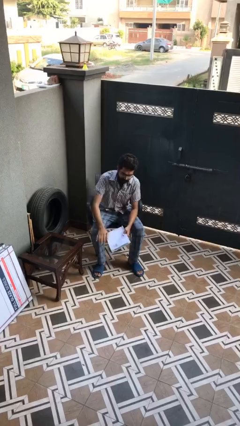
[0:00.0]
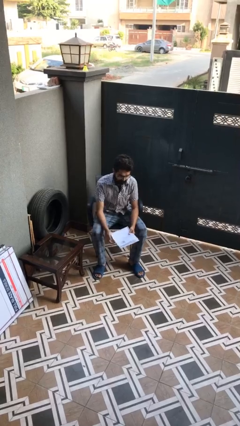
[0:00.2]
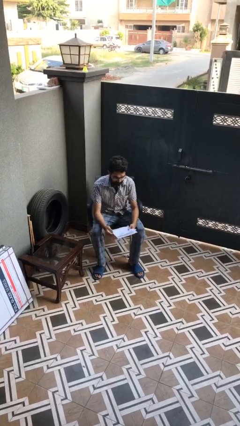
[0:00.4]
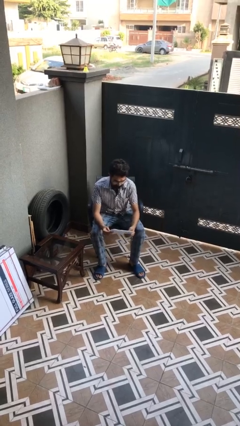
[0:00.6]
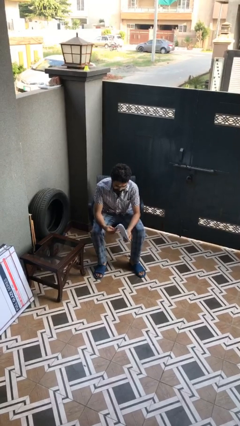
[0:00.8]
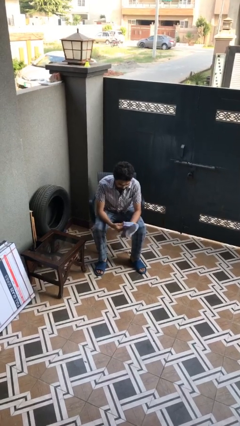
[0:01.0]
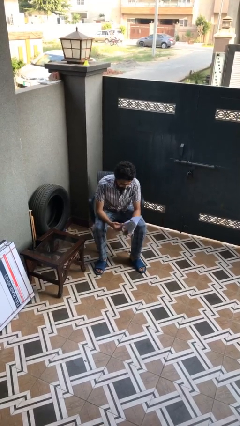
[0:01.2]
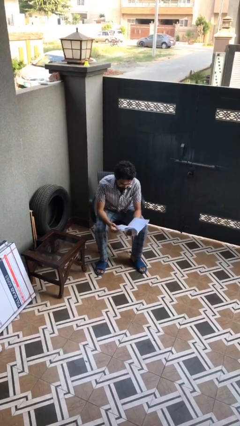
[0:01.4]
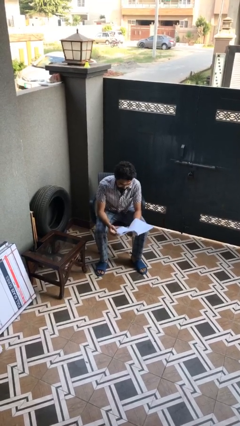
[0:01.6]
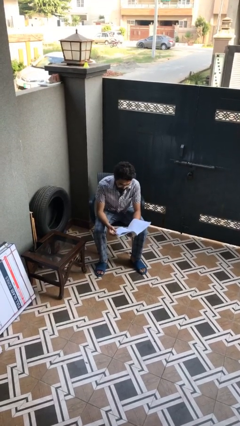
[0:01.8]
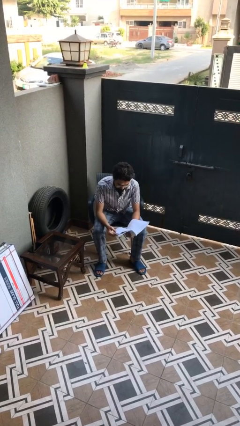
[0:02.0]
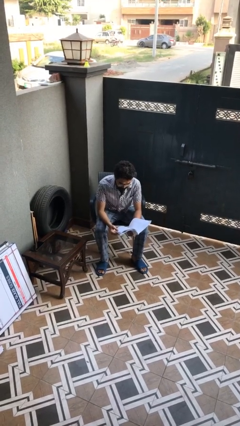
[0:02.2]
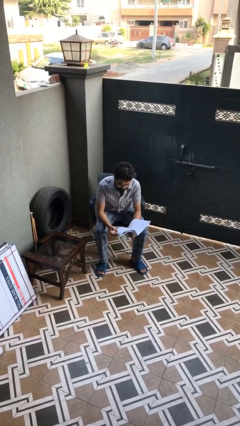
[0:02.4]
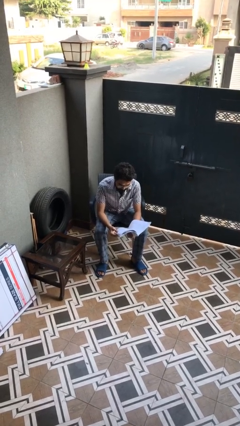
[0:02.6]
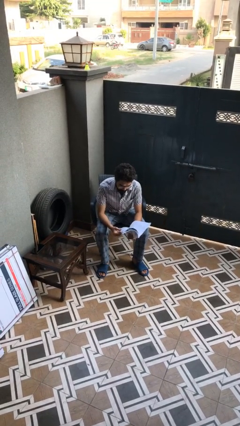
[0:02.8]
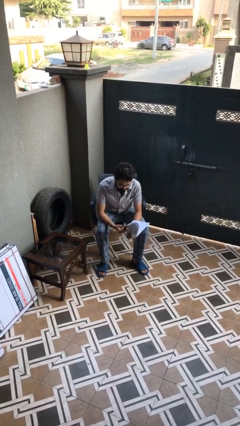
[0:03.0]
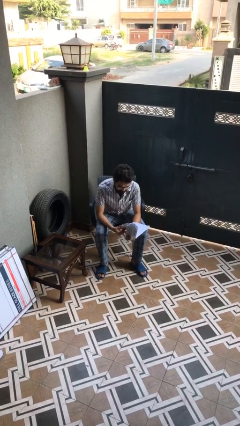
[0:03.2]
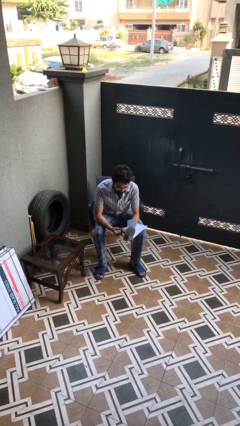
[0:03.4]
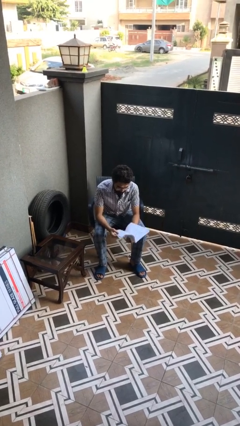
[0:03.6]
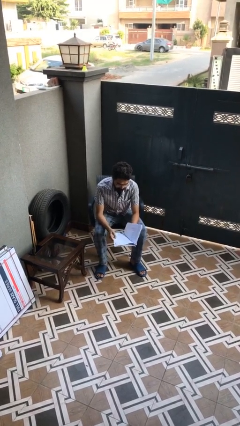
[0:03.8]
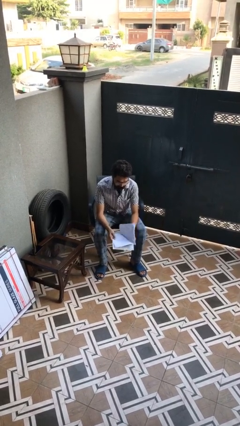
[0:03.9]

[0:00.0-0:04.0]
person reads document

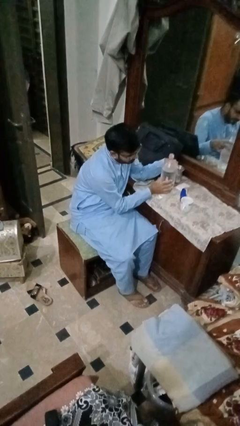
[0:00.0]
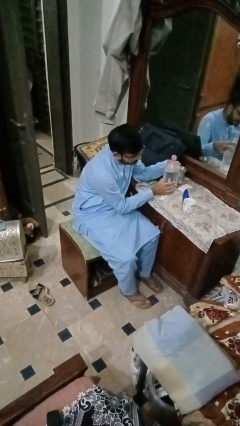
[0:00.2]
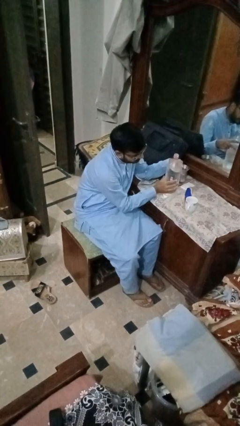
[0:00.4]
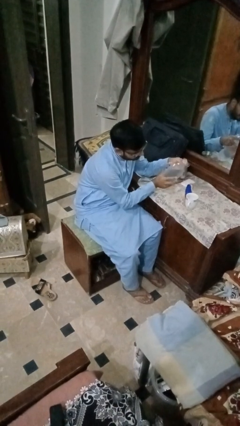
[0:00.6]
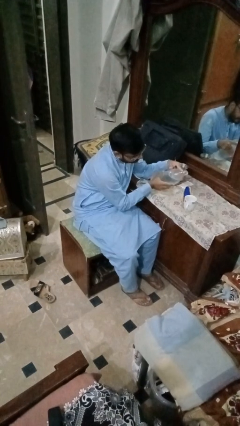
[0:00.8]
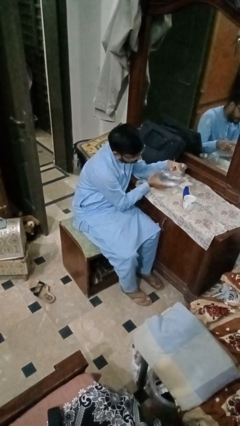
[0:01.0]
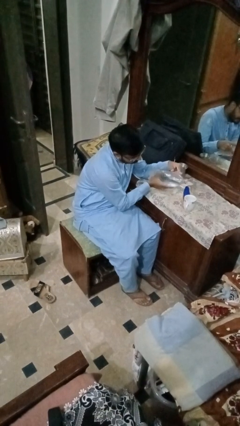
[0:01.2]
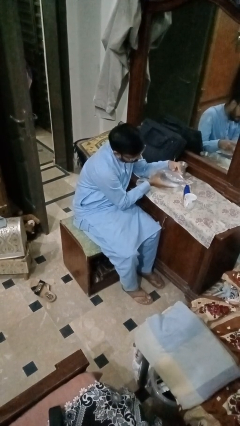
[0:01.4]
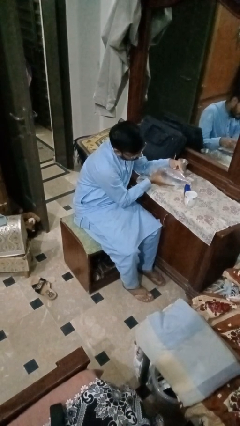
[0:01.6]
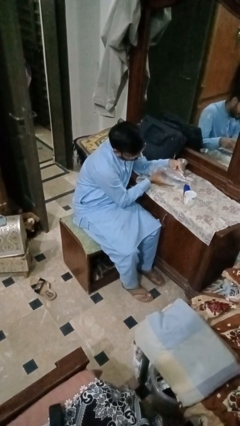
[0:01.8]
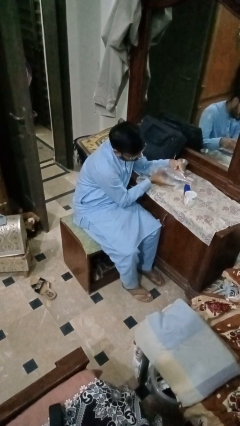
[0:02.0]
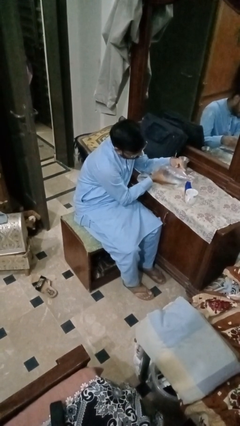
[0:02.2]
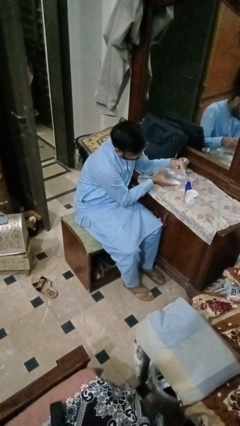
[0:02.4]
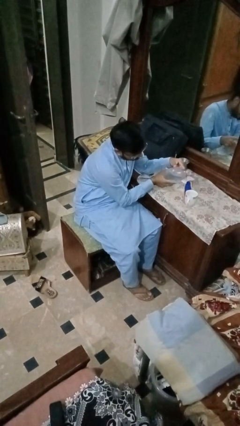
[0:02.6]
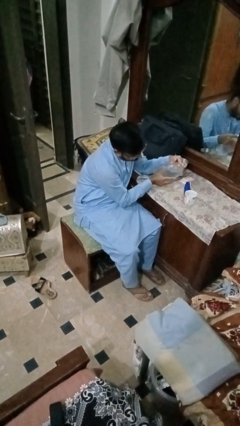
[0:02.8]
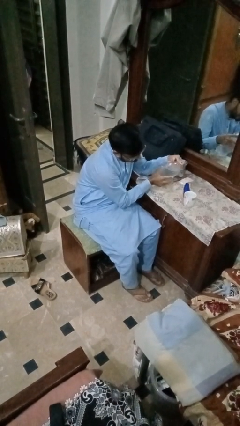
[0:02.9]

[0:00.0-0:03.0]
person pours liquid into cup

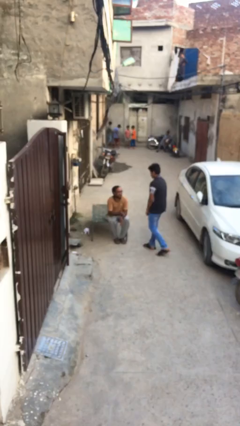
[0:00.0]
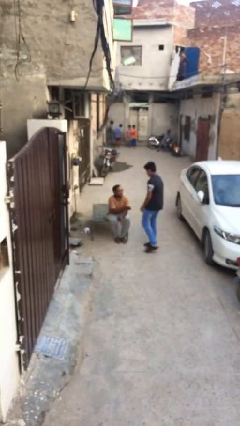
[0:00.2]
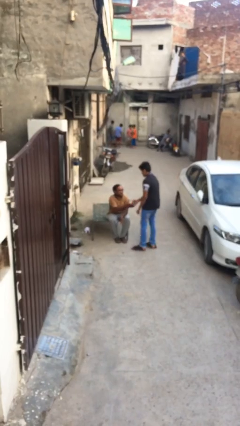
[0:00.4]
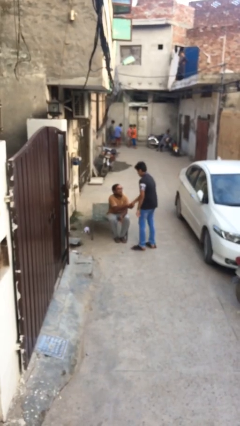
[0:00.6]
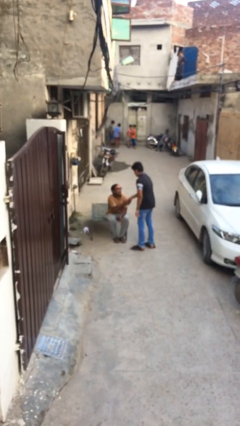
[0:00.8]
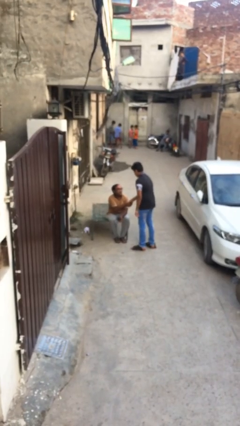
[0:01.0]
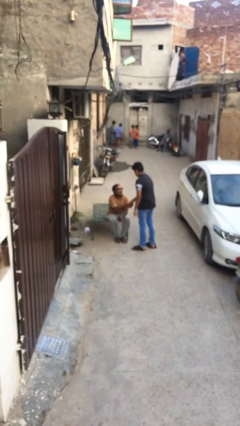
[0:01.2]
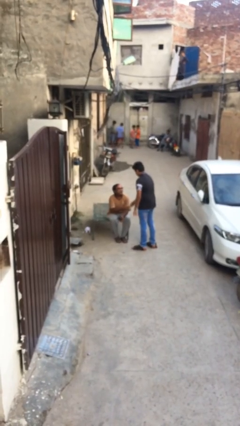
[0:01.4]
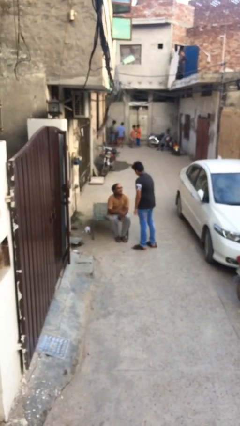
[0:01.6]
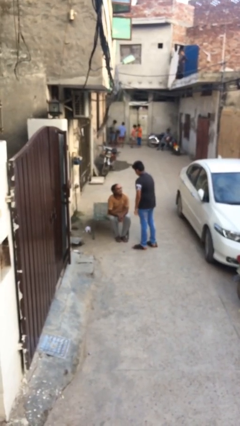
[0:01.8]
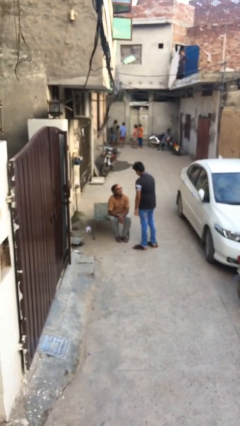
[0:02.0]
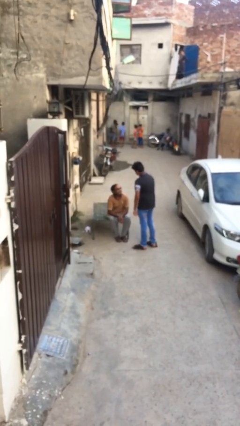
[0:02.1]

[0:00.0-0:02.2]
person shakes hand

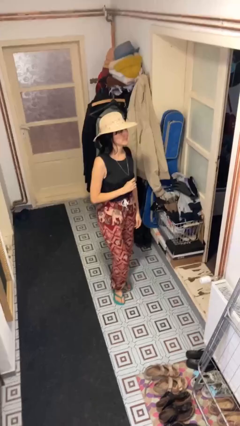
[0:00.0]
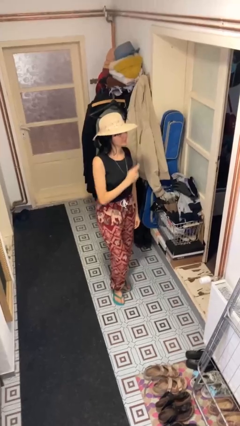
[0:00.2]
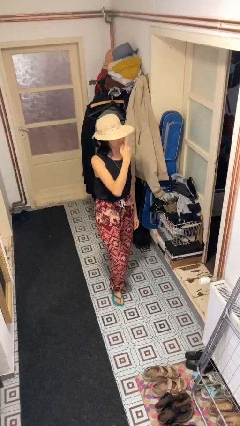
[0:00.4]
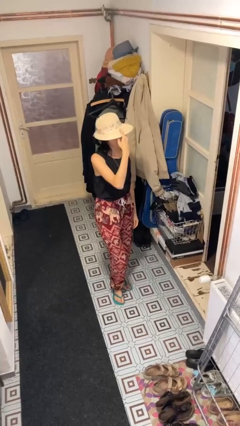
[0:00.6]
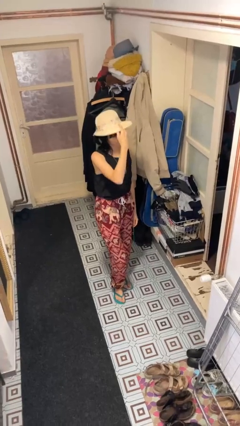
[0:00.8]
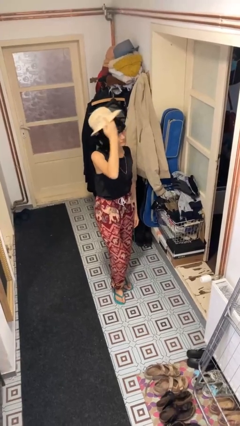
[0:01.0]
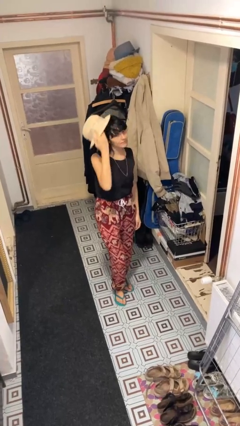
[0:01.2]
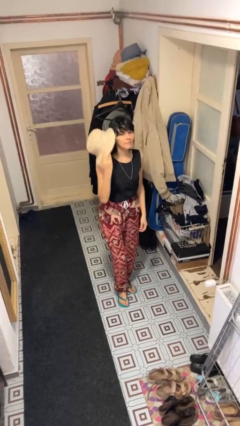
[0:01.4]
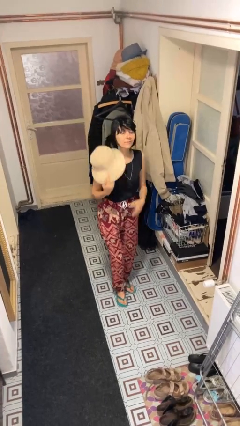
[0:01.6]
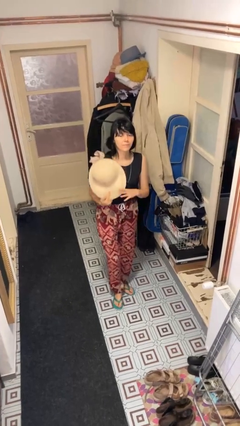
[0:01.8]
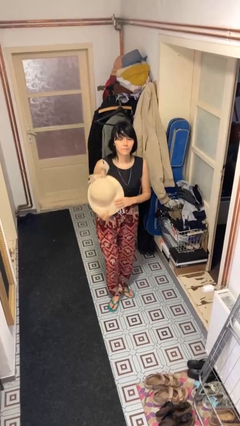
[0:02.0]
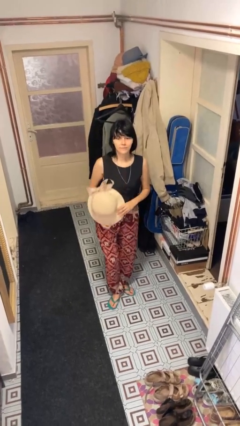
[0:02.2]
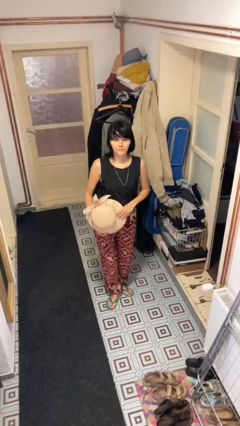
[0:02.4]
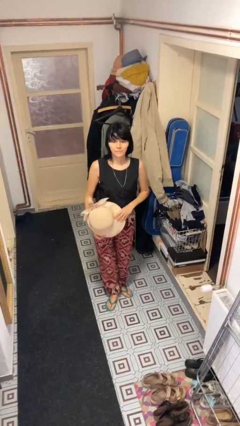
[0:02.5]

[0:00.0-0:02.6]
person takes off hat

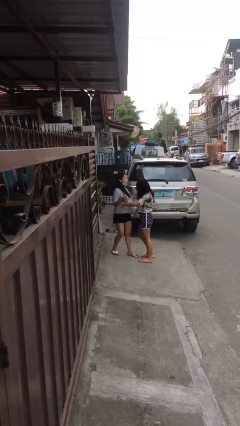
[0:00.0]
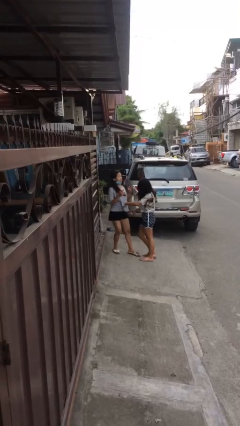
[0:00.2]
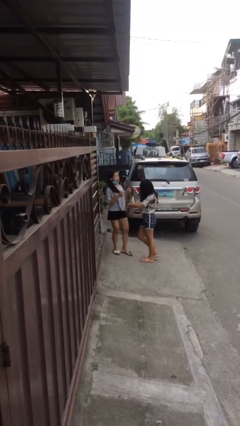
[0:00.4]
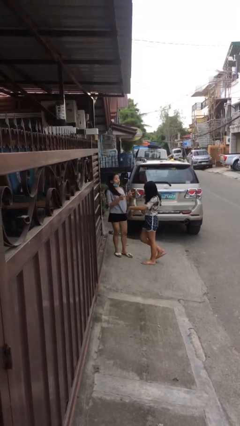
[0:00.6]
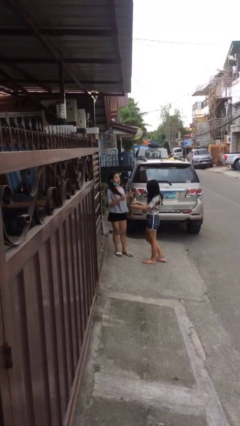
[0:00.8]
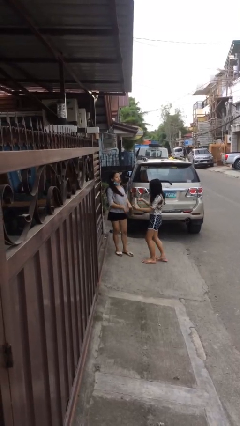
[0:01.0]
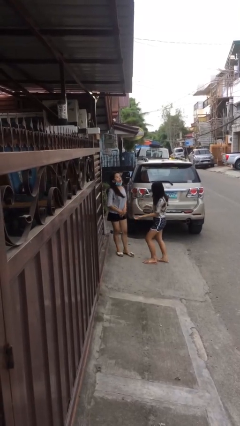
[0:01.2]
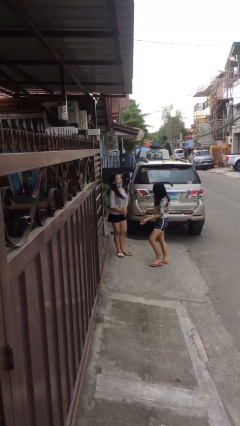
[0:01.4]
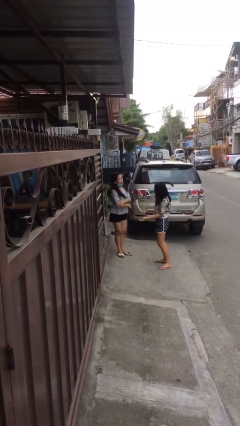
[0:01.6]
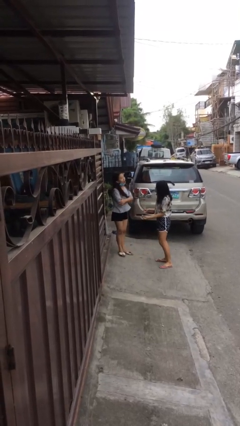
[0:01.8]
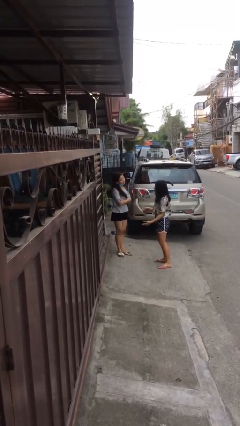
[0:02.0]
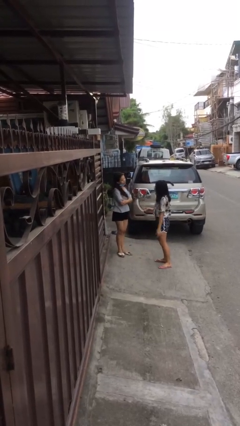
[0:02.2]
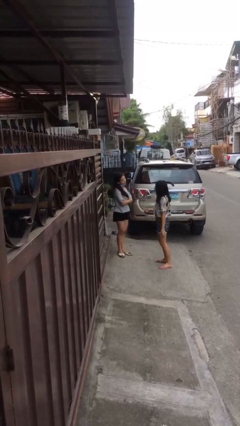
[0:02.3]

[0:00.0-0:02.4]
person talks to person

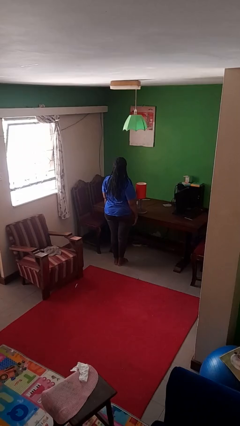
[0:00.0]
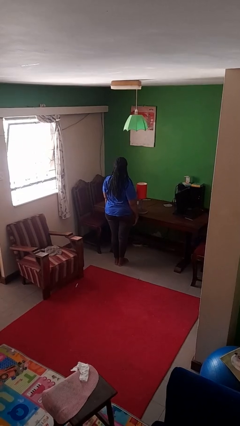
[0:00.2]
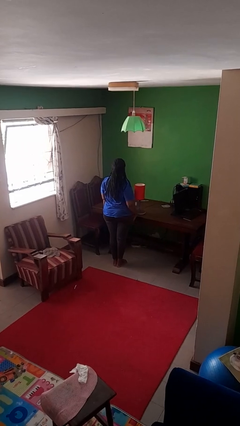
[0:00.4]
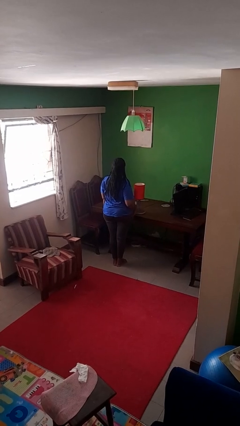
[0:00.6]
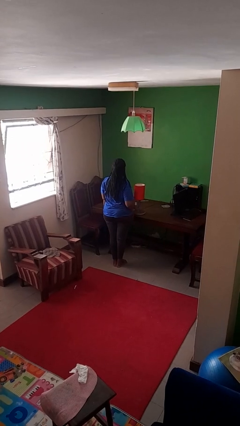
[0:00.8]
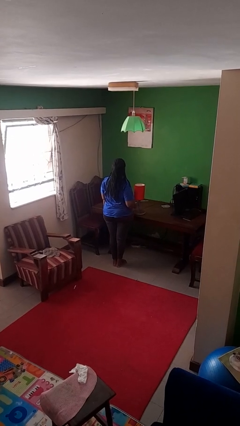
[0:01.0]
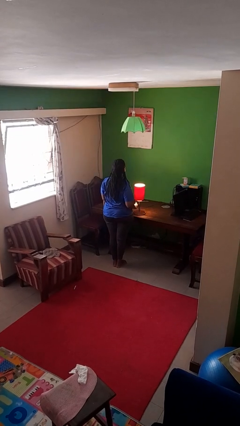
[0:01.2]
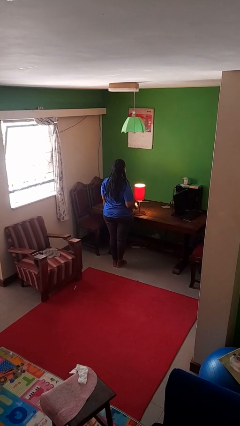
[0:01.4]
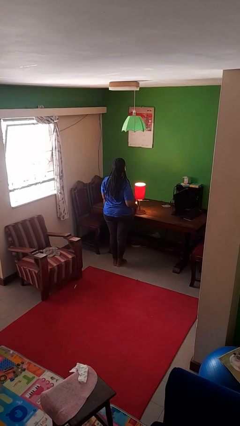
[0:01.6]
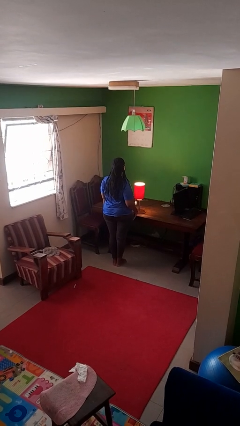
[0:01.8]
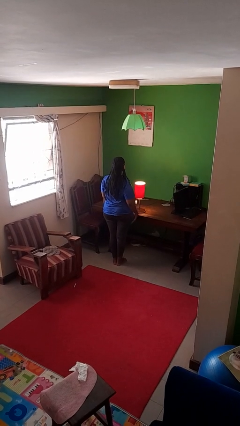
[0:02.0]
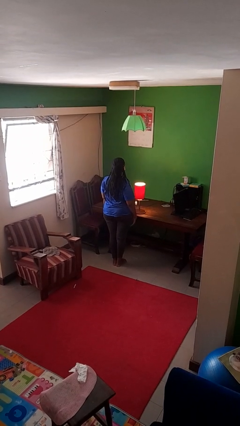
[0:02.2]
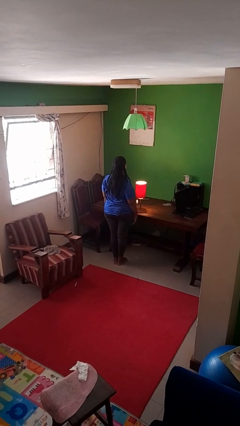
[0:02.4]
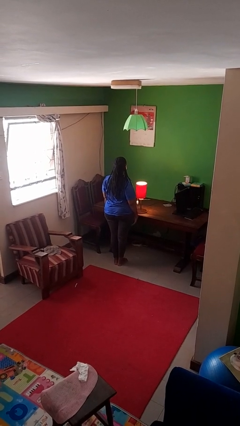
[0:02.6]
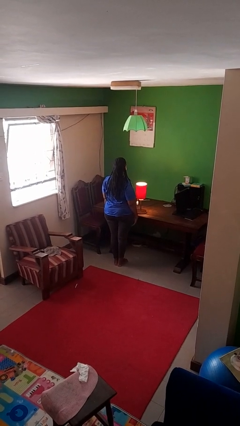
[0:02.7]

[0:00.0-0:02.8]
person turns on lamp

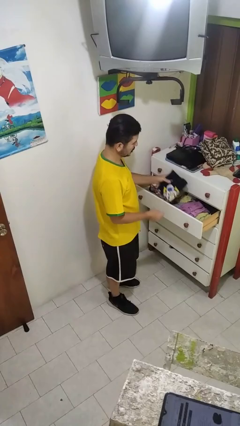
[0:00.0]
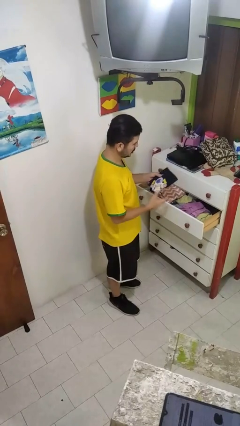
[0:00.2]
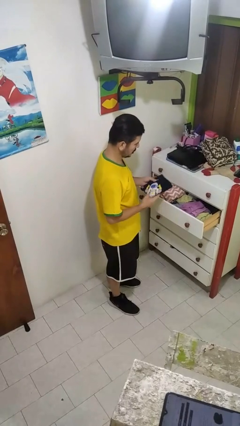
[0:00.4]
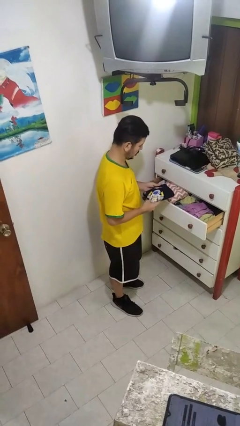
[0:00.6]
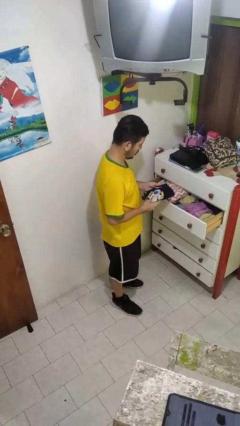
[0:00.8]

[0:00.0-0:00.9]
person takes clothes from dresser
